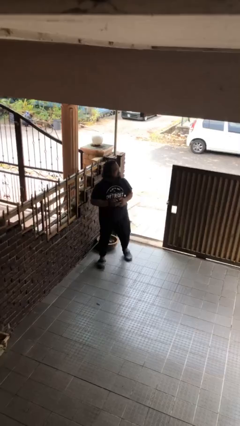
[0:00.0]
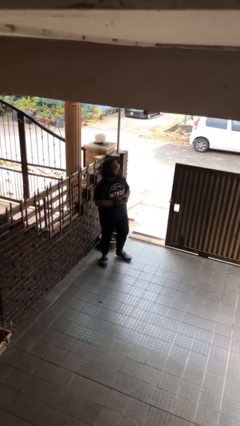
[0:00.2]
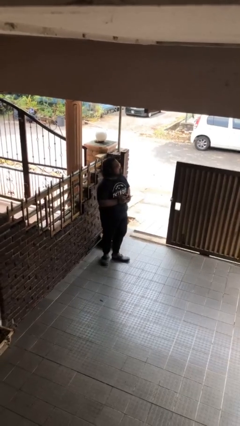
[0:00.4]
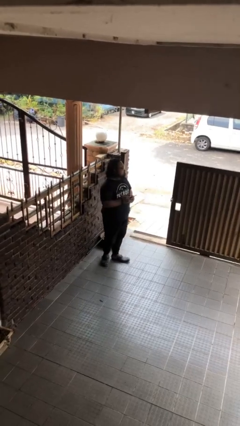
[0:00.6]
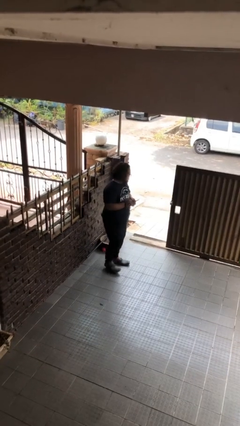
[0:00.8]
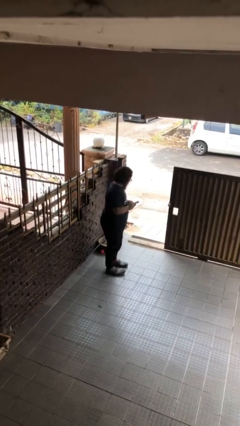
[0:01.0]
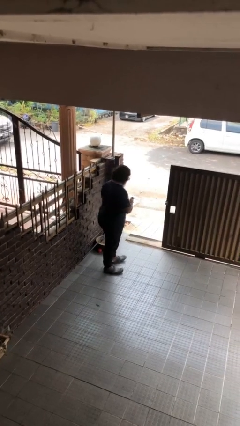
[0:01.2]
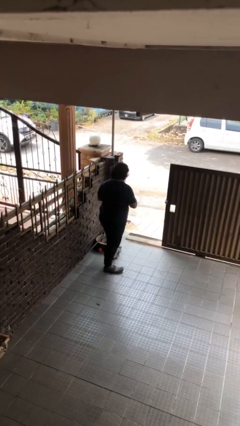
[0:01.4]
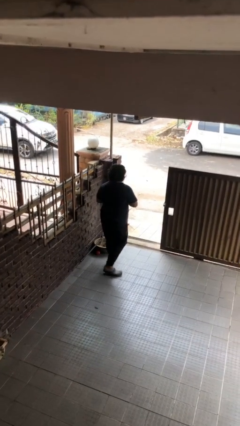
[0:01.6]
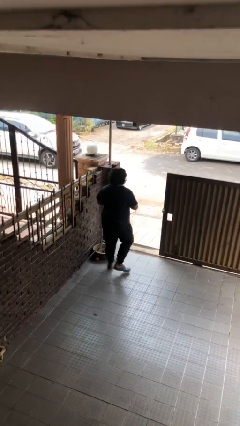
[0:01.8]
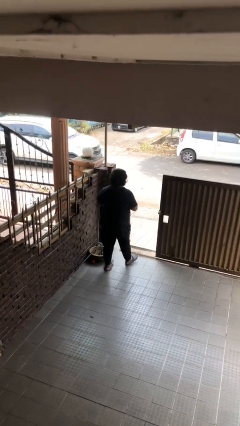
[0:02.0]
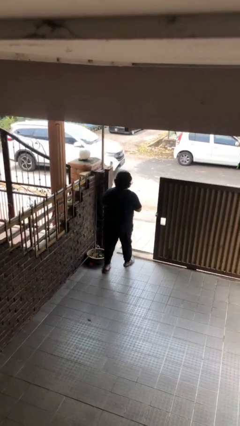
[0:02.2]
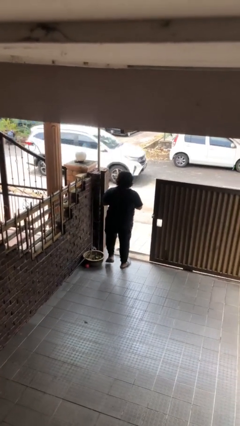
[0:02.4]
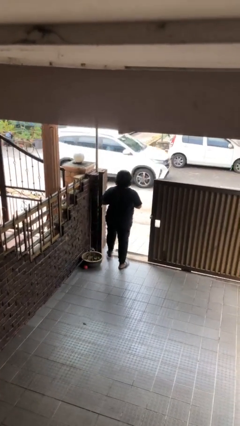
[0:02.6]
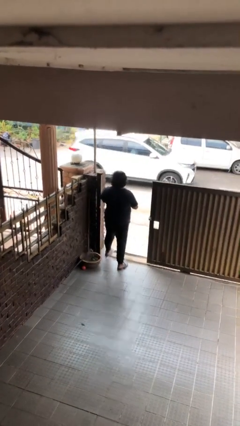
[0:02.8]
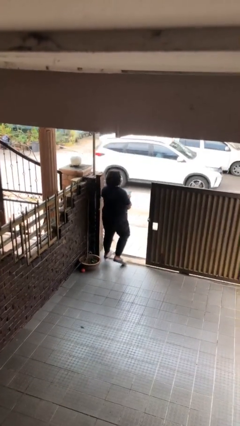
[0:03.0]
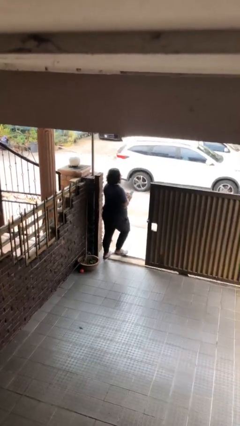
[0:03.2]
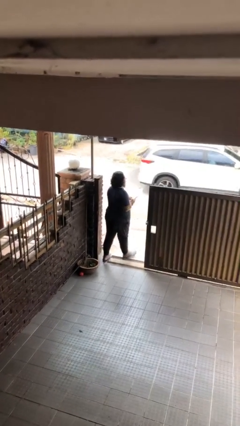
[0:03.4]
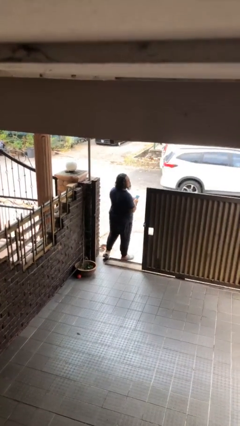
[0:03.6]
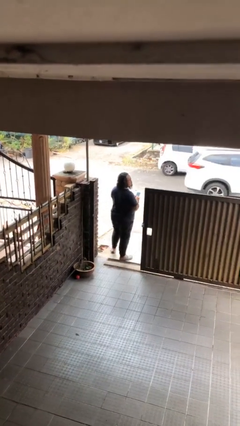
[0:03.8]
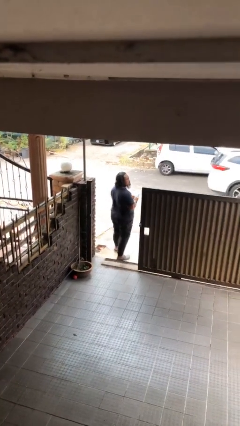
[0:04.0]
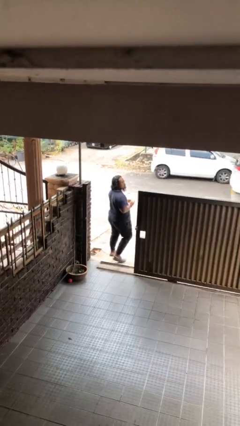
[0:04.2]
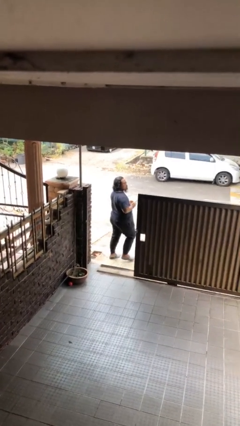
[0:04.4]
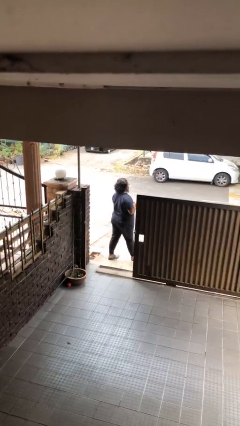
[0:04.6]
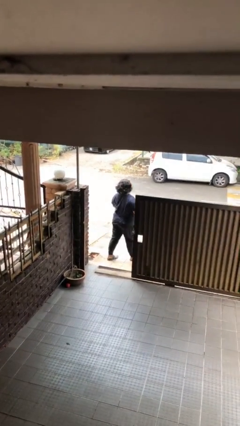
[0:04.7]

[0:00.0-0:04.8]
person exits scene through structure

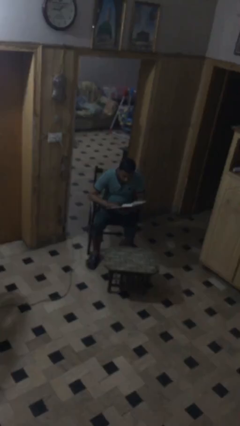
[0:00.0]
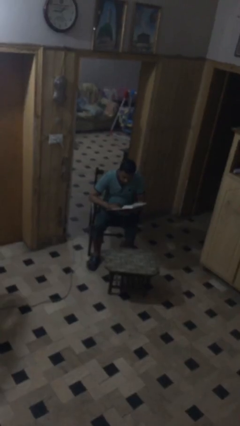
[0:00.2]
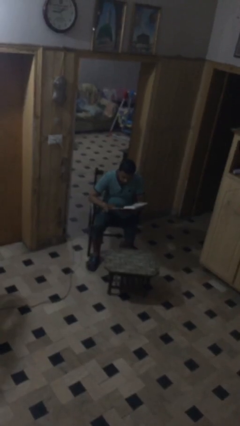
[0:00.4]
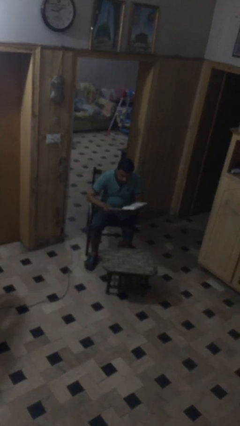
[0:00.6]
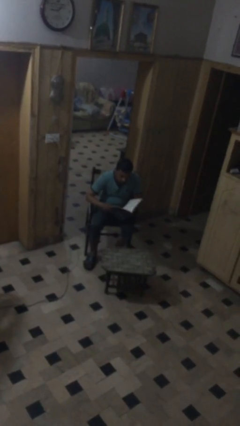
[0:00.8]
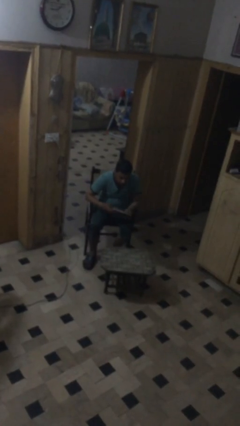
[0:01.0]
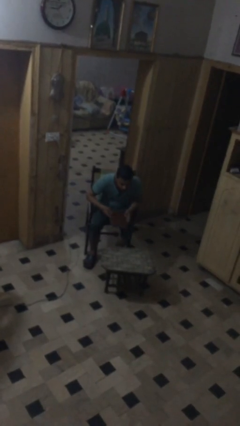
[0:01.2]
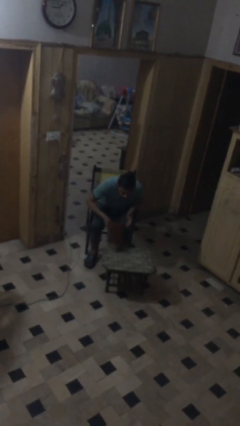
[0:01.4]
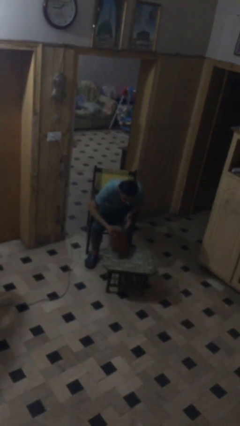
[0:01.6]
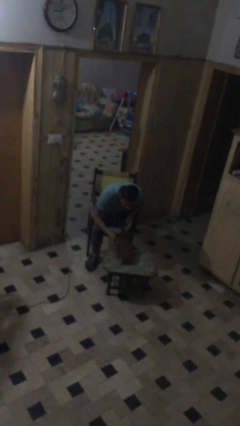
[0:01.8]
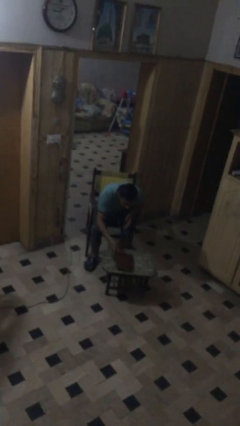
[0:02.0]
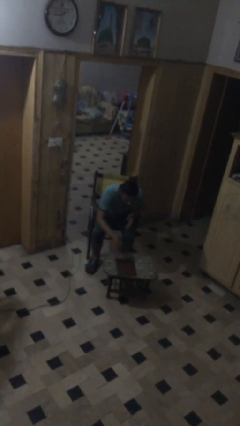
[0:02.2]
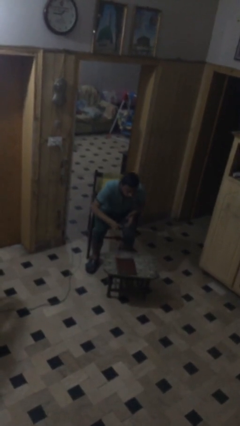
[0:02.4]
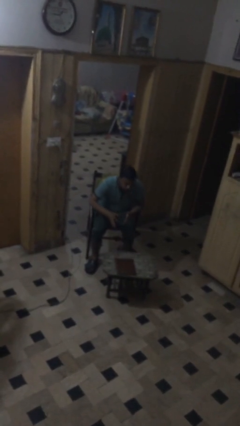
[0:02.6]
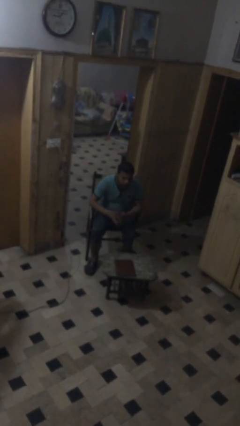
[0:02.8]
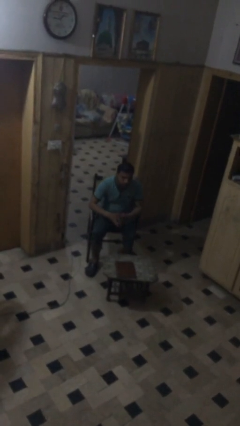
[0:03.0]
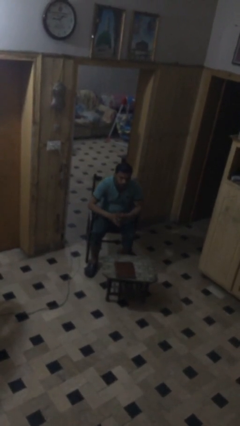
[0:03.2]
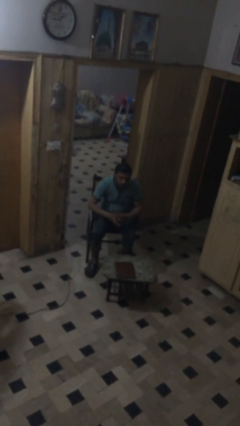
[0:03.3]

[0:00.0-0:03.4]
person puts down object on table

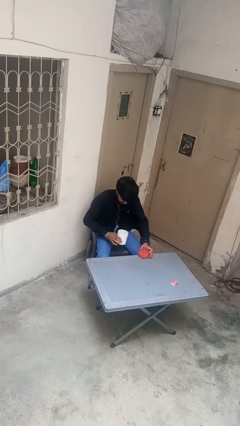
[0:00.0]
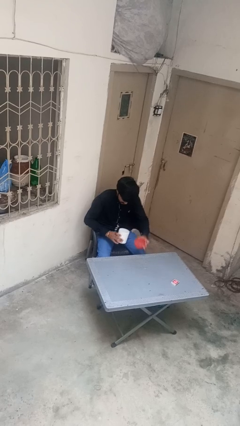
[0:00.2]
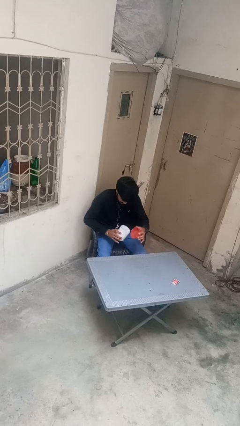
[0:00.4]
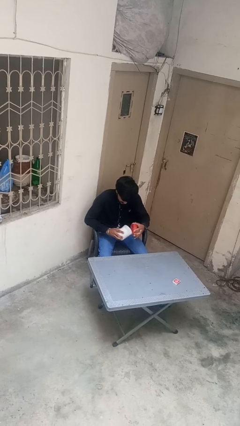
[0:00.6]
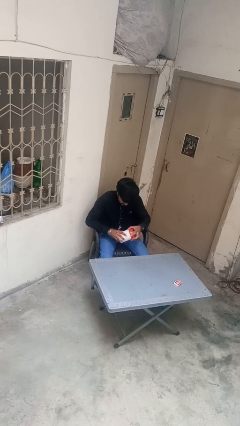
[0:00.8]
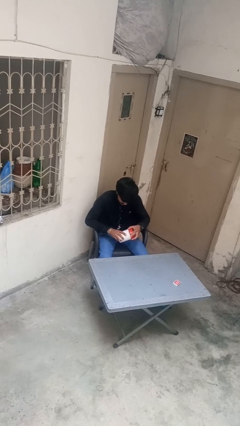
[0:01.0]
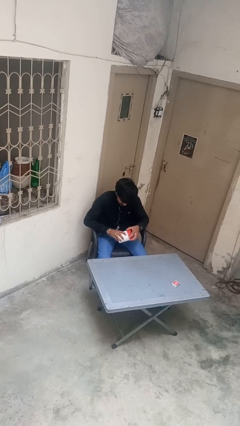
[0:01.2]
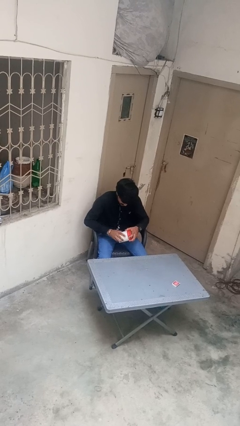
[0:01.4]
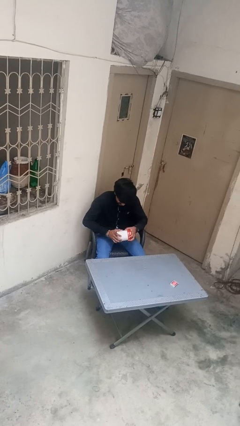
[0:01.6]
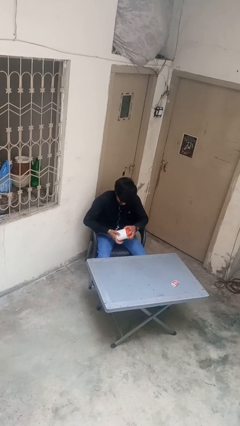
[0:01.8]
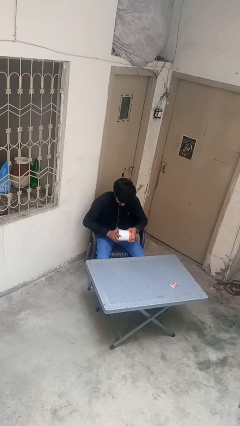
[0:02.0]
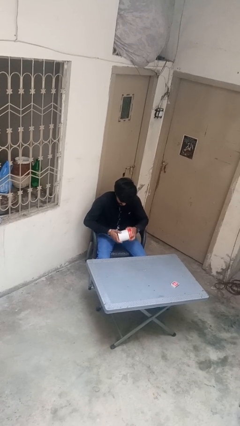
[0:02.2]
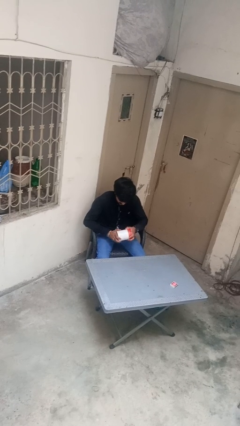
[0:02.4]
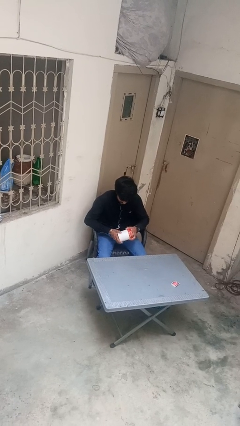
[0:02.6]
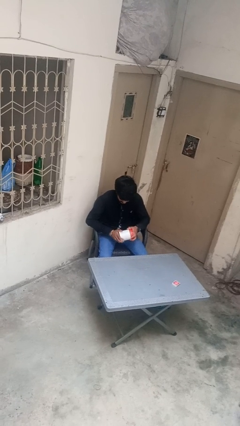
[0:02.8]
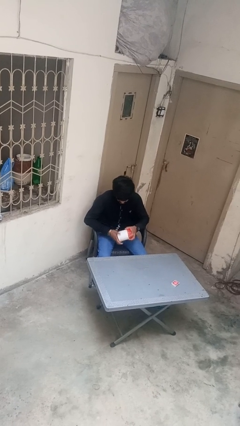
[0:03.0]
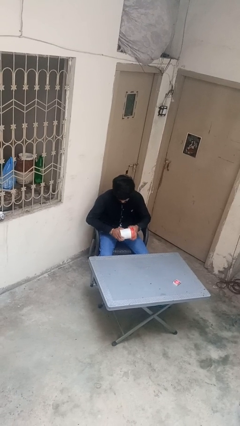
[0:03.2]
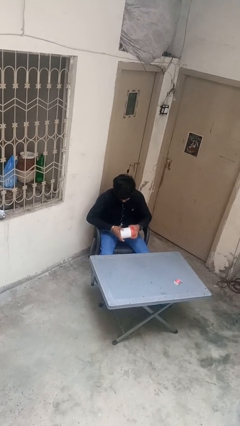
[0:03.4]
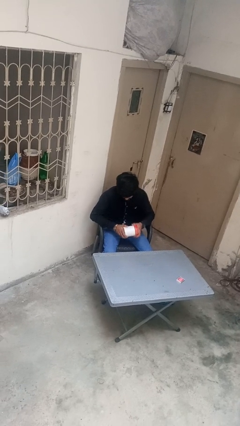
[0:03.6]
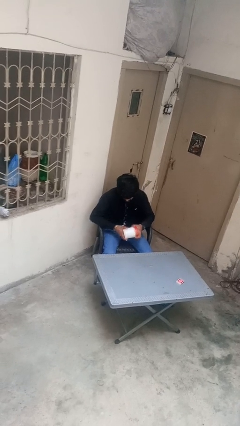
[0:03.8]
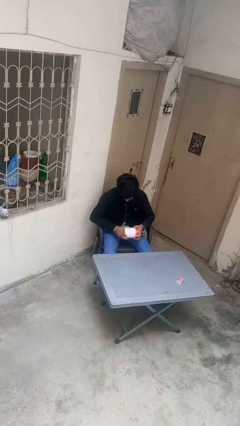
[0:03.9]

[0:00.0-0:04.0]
person closes jar

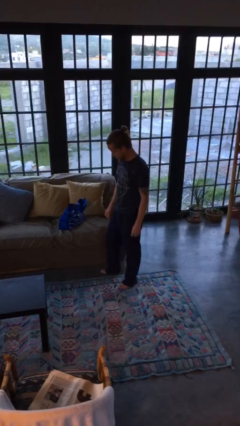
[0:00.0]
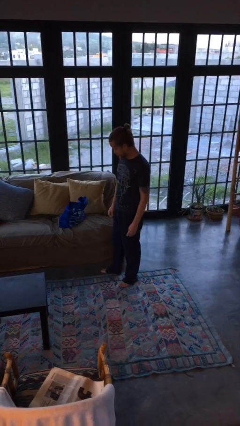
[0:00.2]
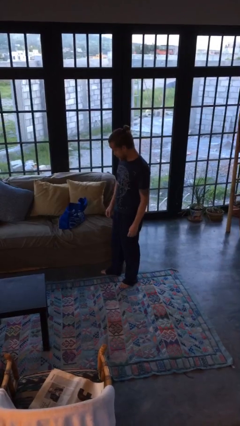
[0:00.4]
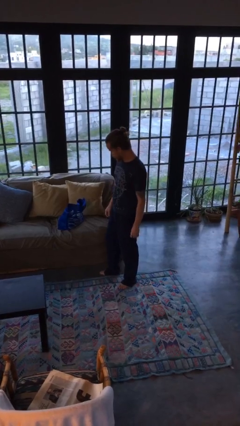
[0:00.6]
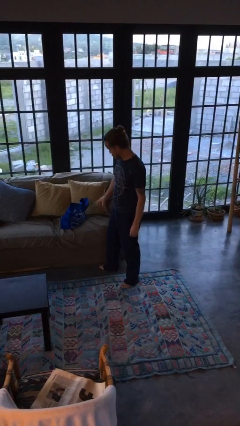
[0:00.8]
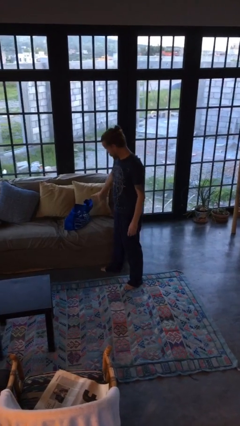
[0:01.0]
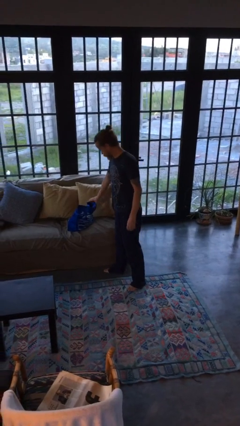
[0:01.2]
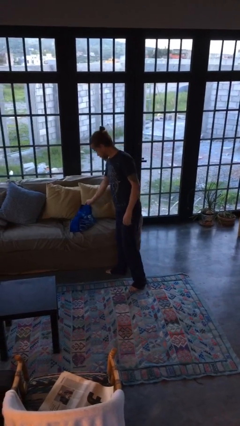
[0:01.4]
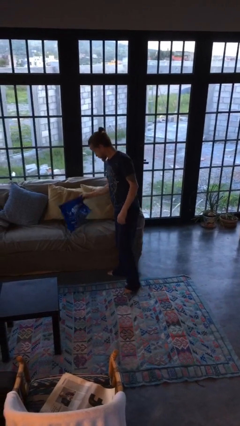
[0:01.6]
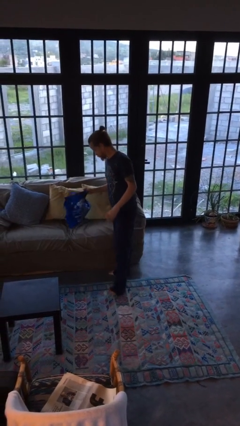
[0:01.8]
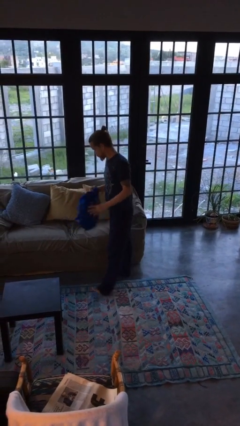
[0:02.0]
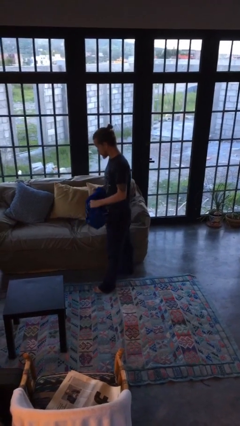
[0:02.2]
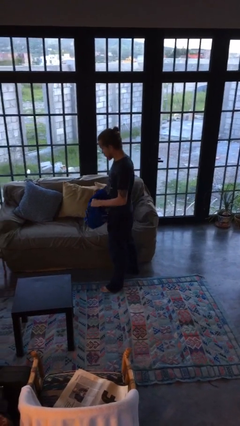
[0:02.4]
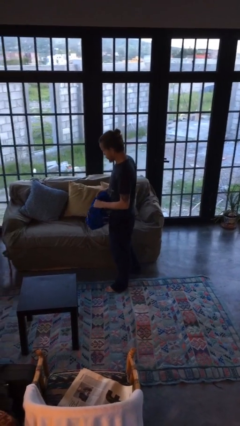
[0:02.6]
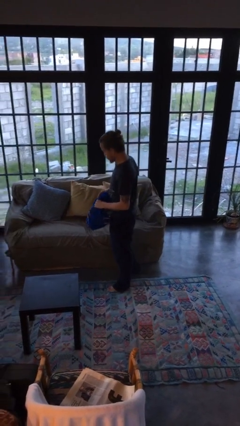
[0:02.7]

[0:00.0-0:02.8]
person picks up object from couch

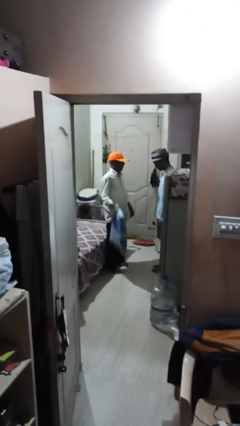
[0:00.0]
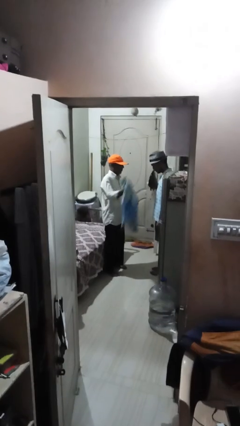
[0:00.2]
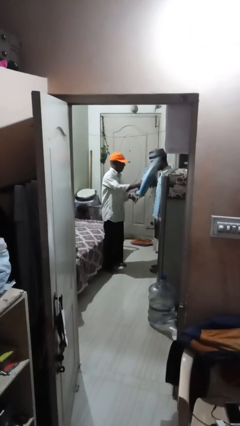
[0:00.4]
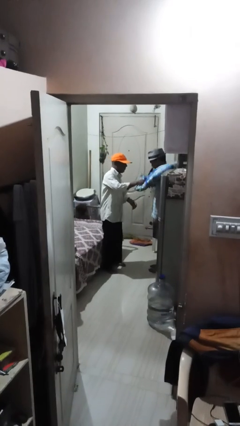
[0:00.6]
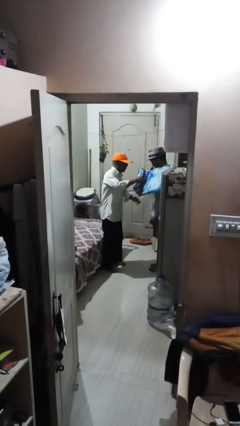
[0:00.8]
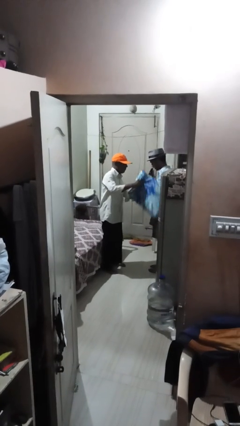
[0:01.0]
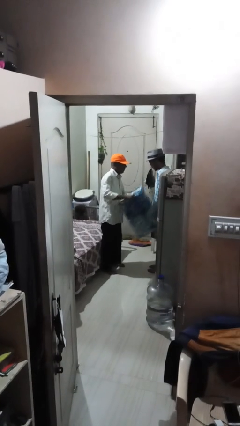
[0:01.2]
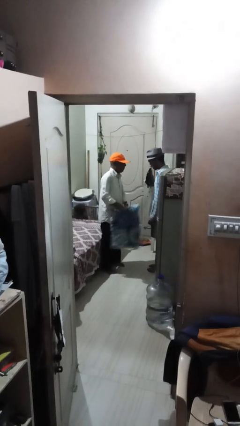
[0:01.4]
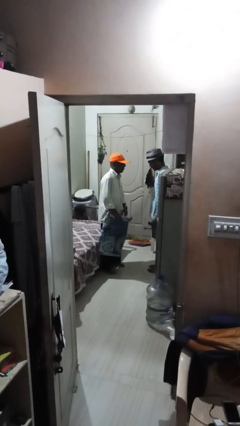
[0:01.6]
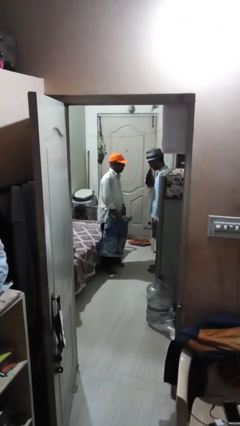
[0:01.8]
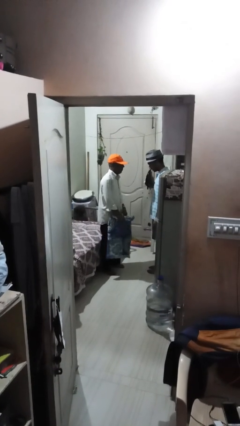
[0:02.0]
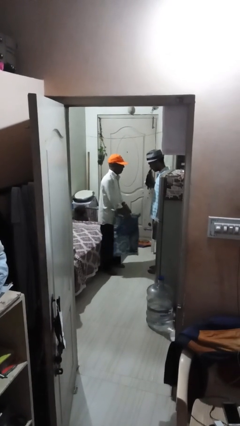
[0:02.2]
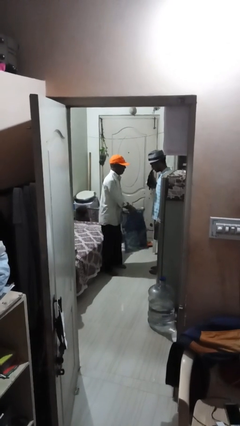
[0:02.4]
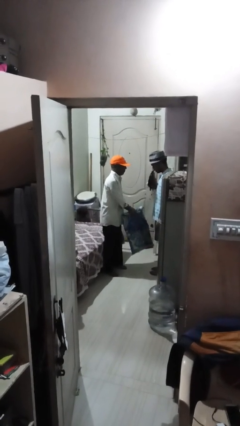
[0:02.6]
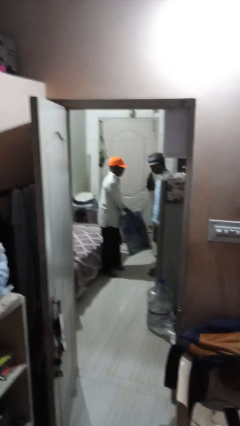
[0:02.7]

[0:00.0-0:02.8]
person hits person with pillow
